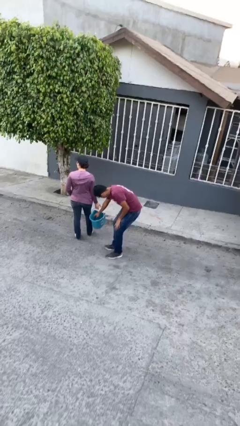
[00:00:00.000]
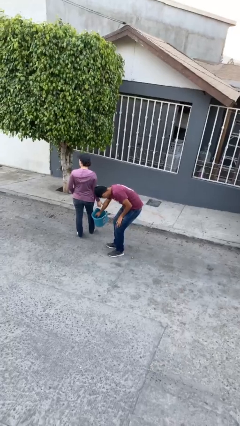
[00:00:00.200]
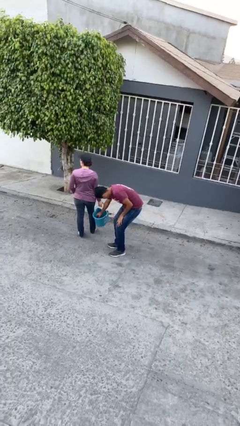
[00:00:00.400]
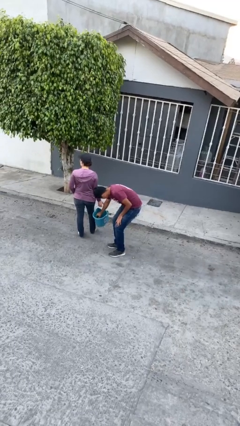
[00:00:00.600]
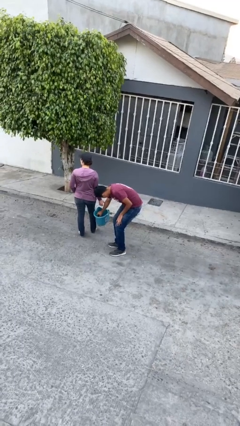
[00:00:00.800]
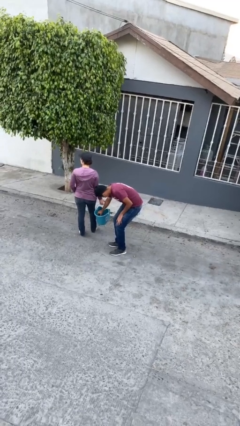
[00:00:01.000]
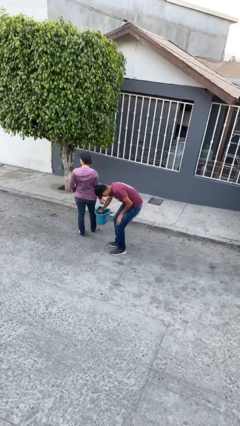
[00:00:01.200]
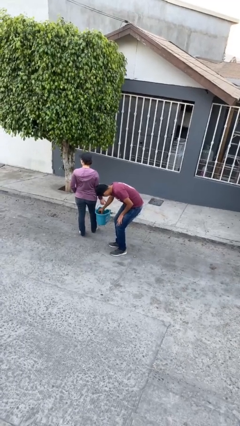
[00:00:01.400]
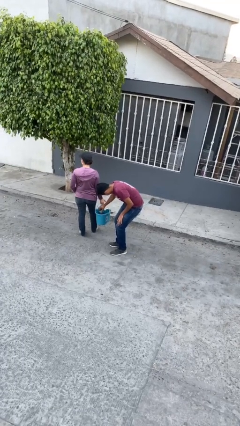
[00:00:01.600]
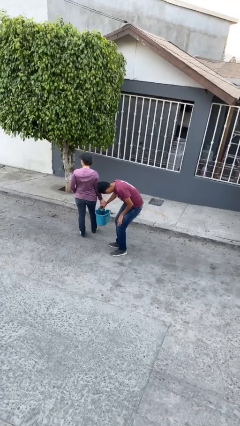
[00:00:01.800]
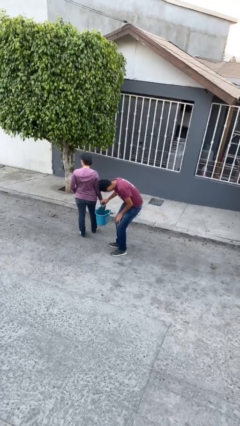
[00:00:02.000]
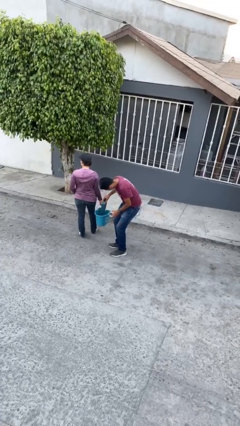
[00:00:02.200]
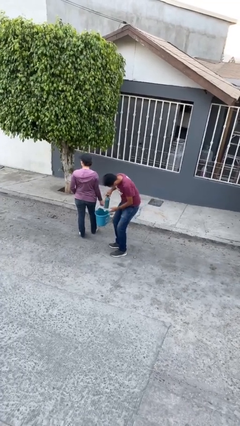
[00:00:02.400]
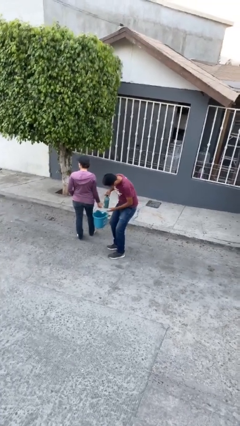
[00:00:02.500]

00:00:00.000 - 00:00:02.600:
person steals object from person

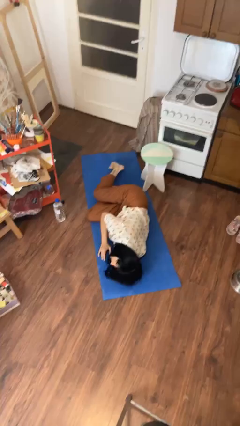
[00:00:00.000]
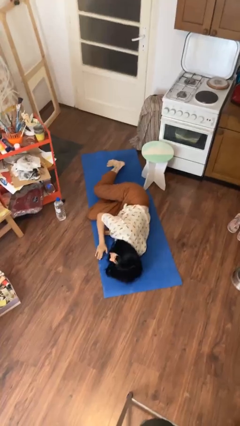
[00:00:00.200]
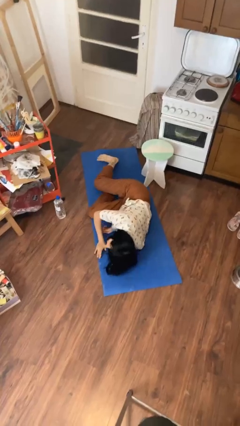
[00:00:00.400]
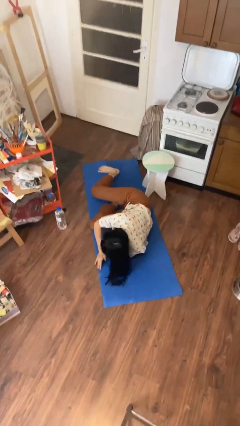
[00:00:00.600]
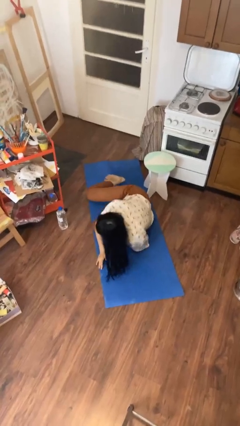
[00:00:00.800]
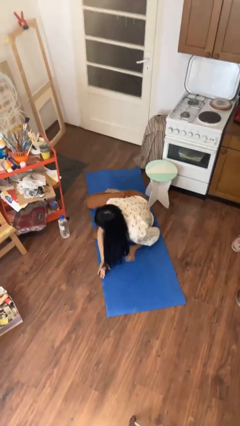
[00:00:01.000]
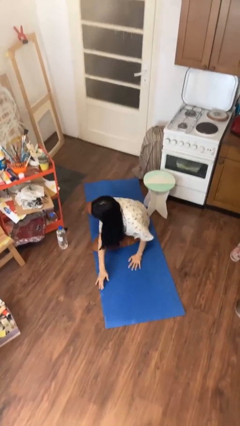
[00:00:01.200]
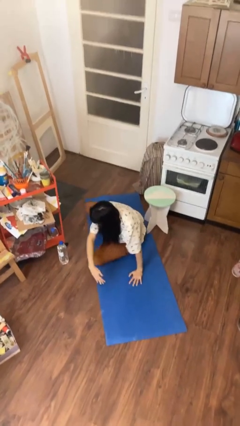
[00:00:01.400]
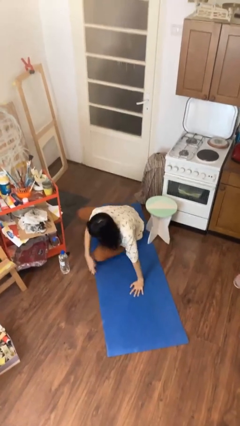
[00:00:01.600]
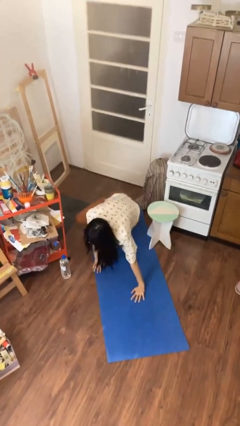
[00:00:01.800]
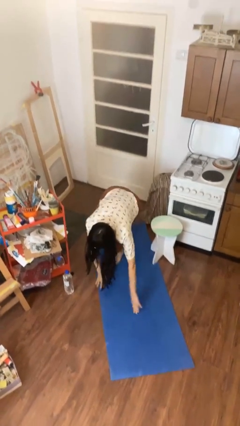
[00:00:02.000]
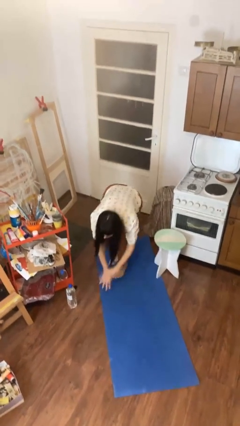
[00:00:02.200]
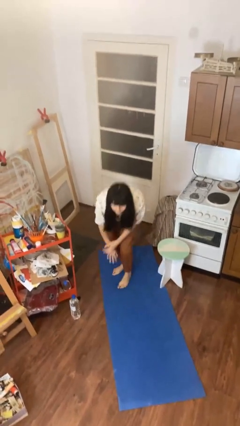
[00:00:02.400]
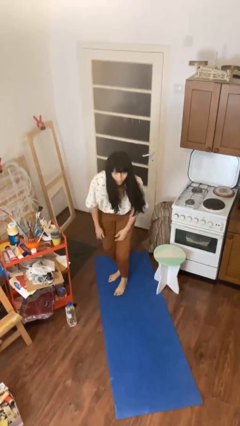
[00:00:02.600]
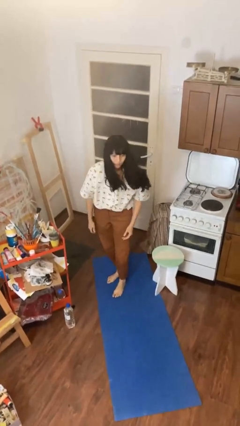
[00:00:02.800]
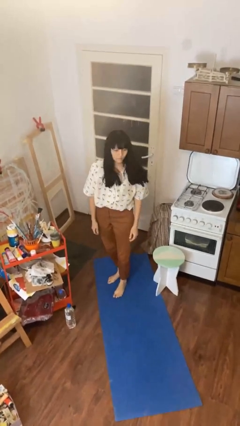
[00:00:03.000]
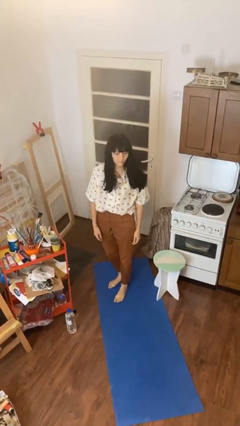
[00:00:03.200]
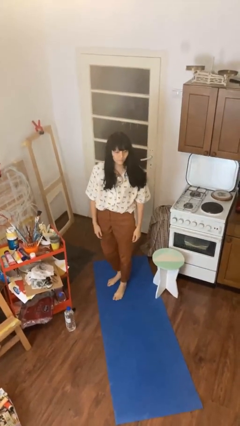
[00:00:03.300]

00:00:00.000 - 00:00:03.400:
person stands up from floor

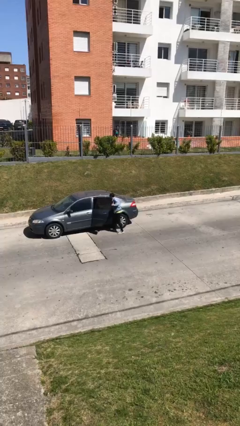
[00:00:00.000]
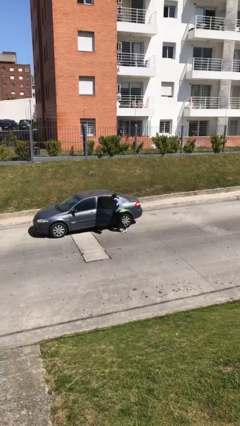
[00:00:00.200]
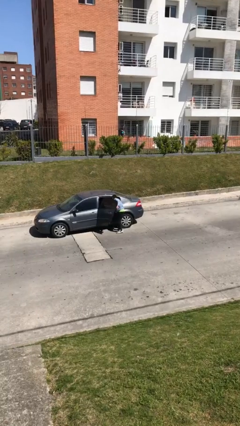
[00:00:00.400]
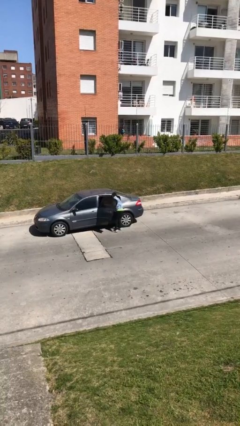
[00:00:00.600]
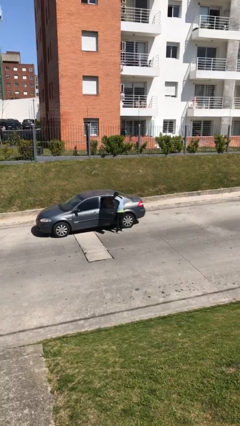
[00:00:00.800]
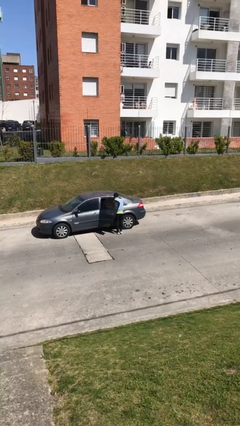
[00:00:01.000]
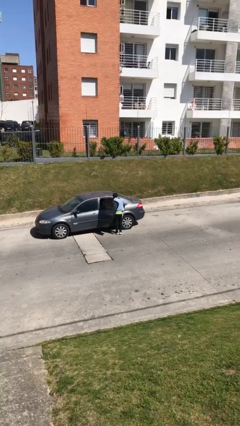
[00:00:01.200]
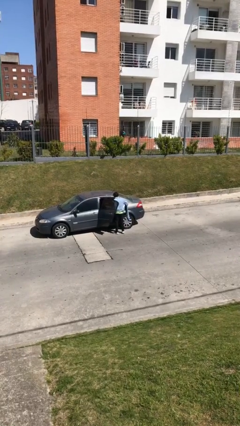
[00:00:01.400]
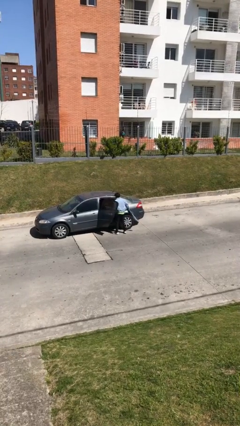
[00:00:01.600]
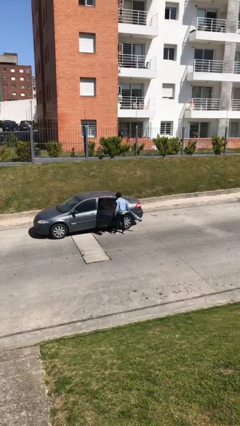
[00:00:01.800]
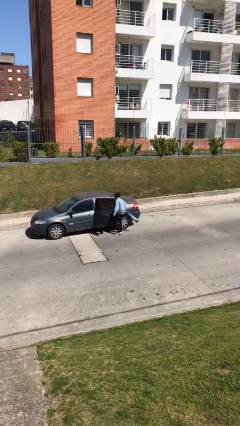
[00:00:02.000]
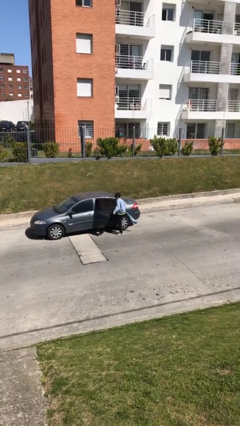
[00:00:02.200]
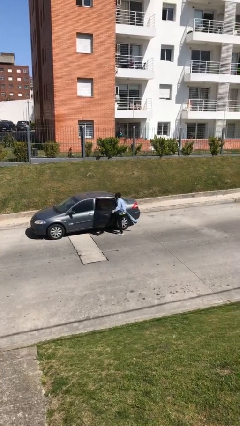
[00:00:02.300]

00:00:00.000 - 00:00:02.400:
person unloads car

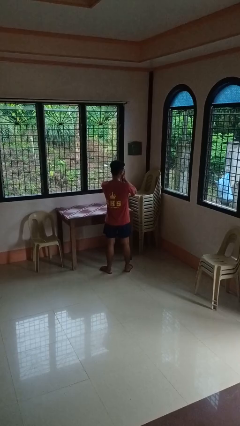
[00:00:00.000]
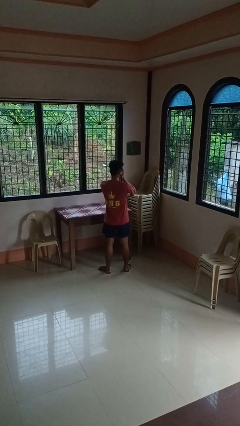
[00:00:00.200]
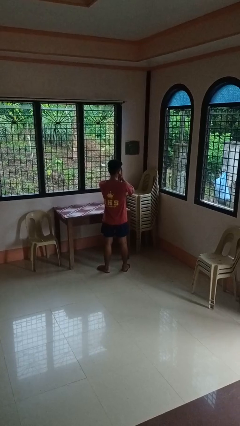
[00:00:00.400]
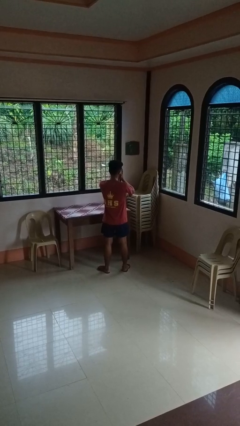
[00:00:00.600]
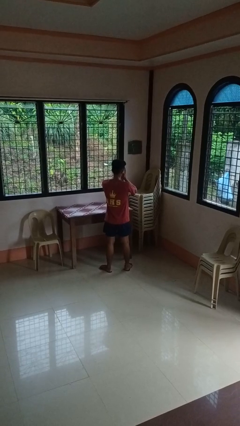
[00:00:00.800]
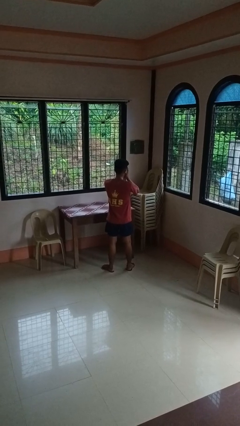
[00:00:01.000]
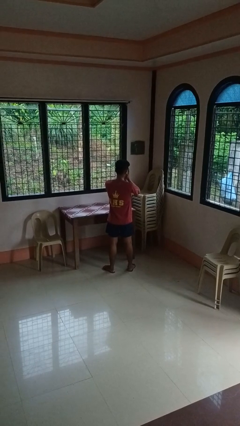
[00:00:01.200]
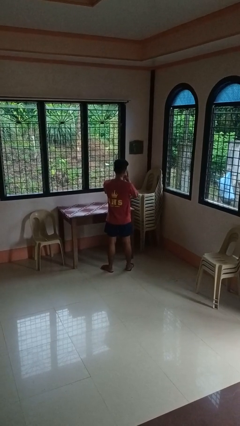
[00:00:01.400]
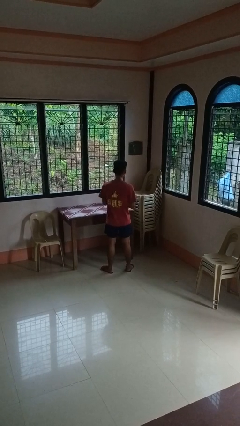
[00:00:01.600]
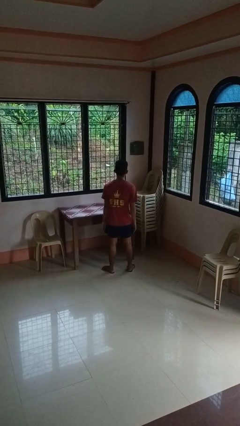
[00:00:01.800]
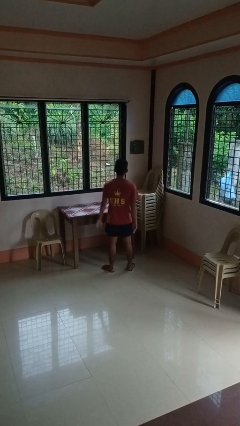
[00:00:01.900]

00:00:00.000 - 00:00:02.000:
person covers face with hands

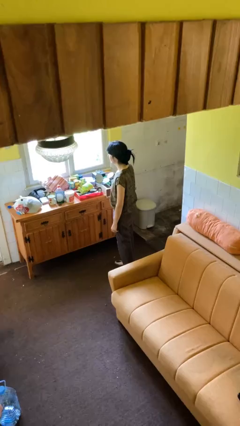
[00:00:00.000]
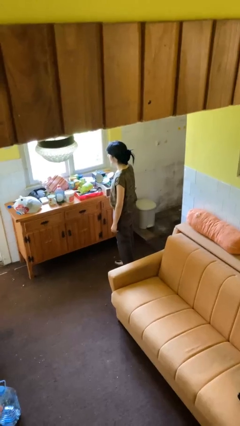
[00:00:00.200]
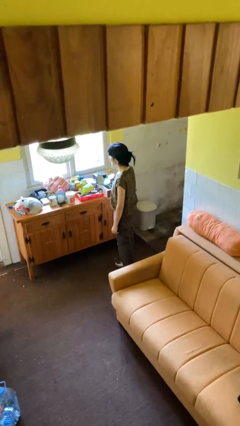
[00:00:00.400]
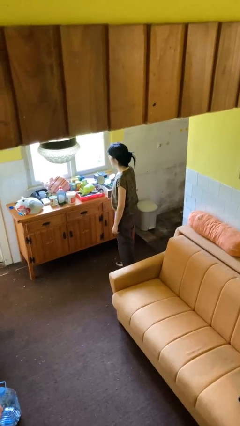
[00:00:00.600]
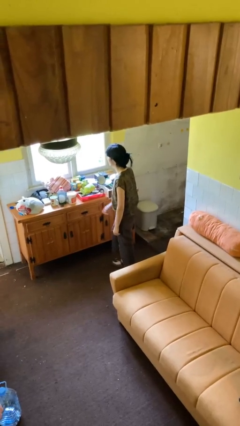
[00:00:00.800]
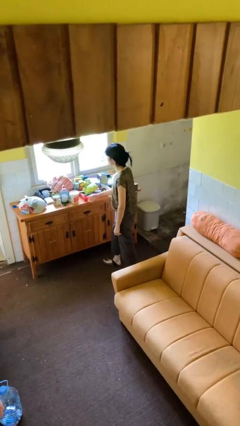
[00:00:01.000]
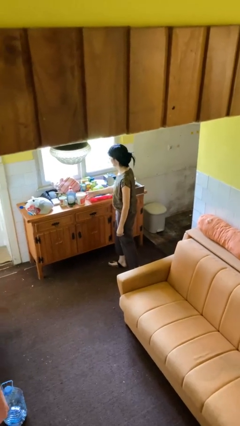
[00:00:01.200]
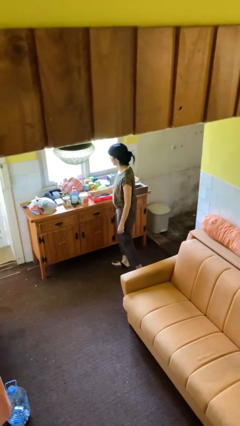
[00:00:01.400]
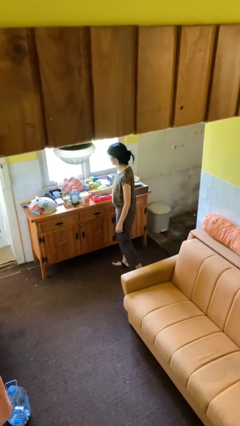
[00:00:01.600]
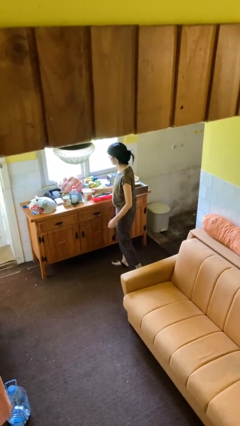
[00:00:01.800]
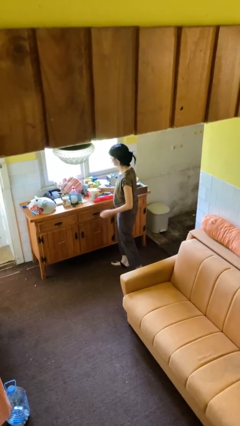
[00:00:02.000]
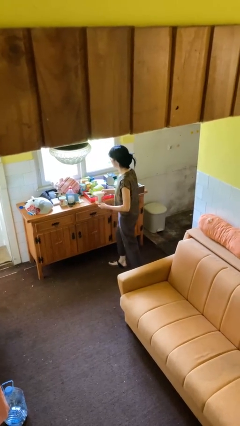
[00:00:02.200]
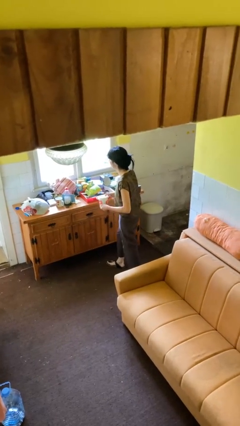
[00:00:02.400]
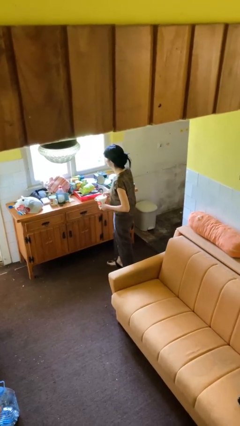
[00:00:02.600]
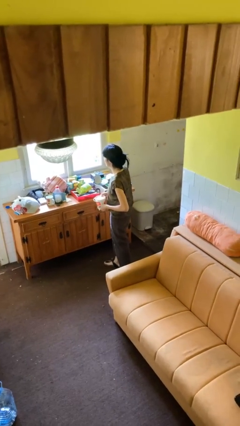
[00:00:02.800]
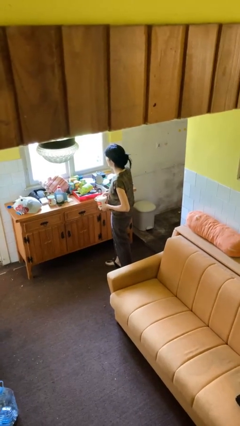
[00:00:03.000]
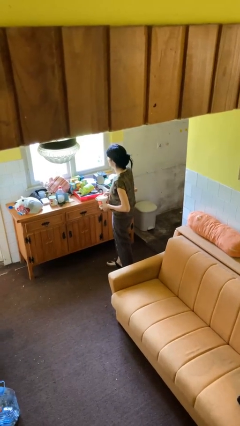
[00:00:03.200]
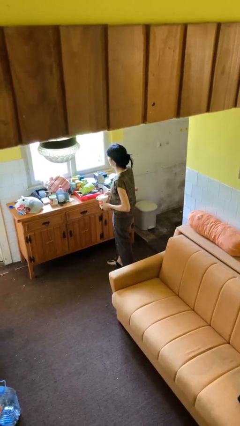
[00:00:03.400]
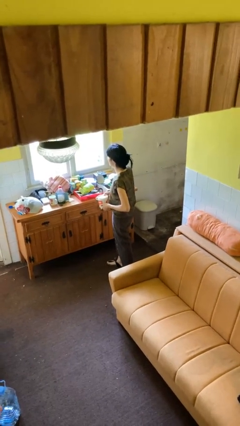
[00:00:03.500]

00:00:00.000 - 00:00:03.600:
person picks up object from countertop

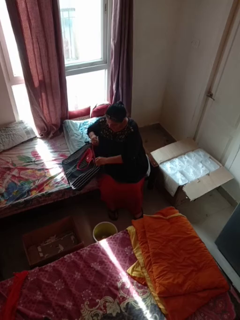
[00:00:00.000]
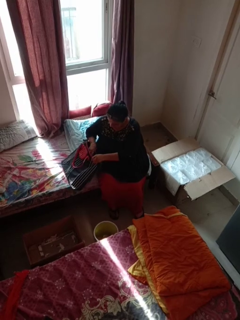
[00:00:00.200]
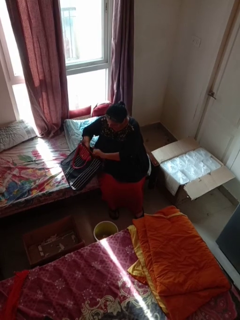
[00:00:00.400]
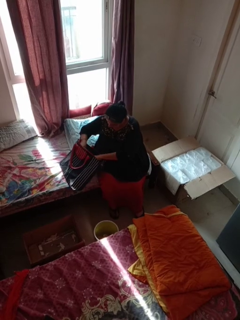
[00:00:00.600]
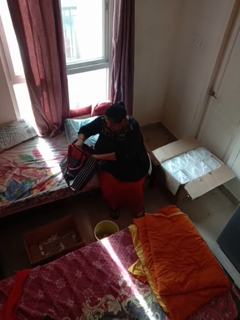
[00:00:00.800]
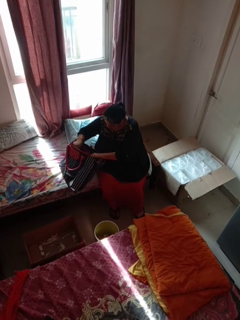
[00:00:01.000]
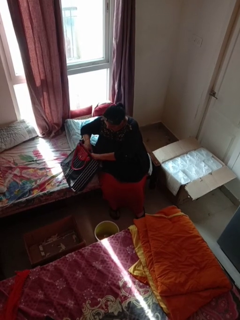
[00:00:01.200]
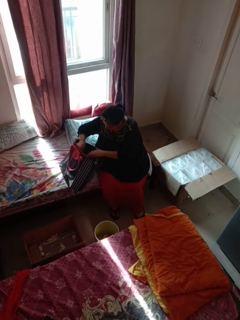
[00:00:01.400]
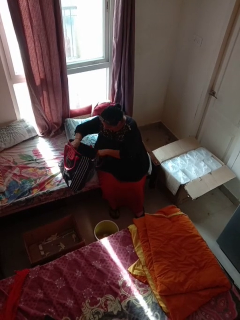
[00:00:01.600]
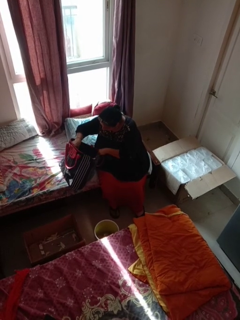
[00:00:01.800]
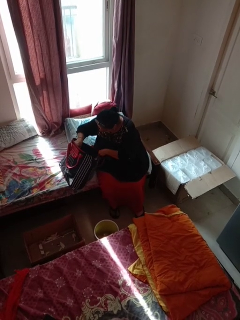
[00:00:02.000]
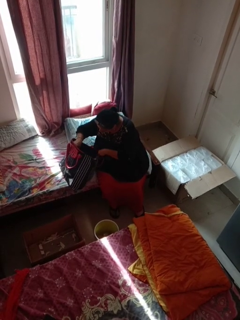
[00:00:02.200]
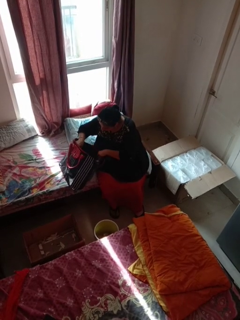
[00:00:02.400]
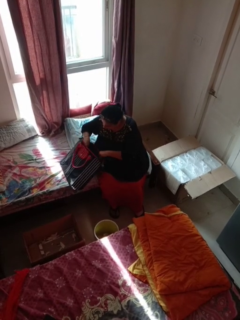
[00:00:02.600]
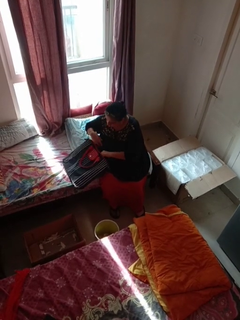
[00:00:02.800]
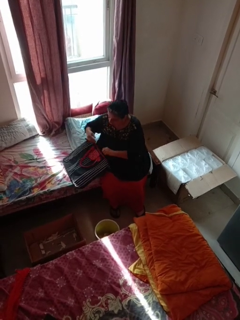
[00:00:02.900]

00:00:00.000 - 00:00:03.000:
person searches in bag

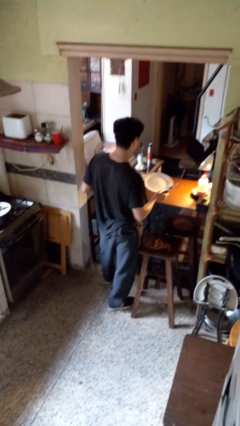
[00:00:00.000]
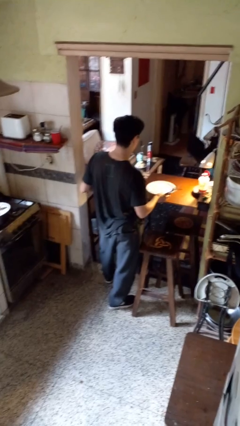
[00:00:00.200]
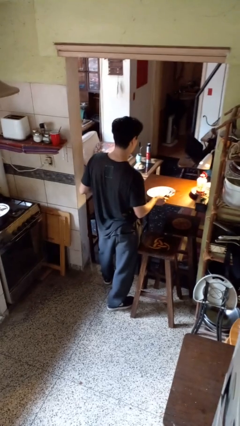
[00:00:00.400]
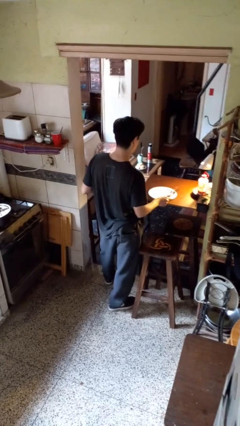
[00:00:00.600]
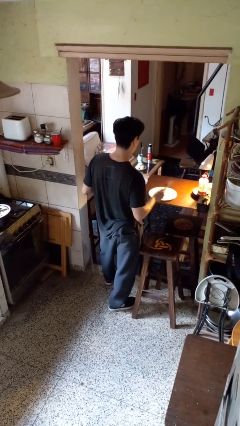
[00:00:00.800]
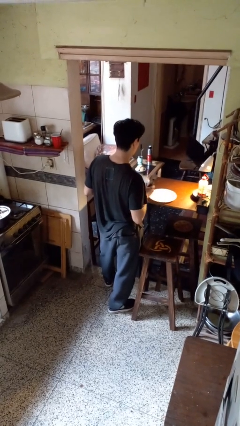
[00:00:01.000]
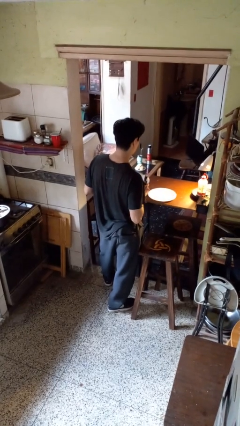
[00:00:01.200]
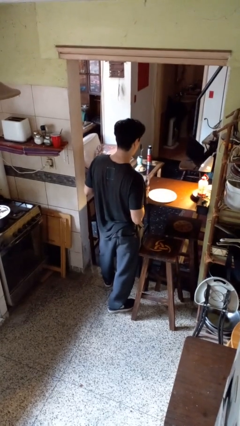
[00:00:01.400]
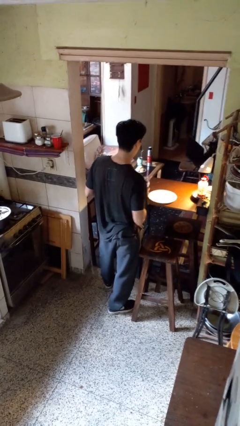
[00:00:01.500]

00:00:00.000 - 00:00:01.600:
person sets table
